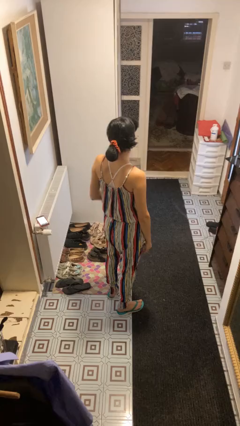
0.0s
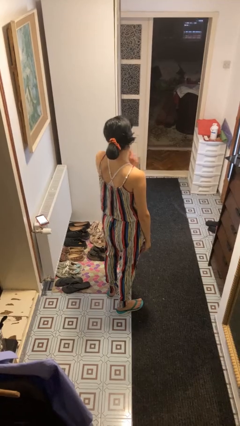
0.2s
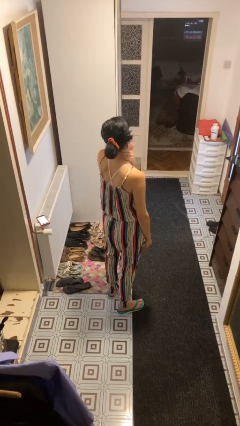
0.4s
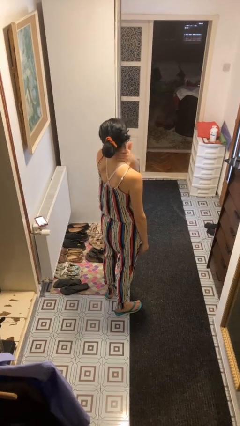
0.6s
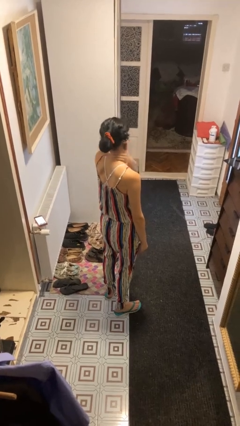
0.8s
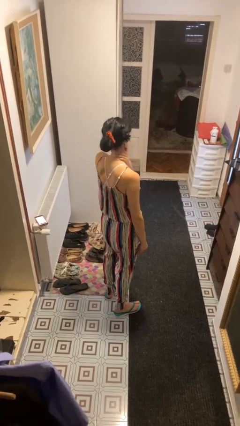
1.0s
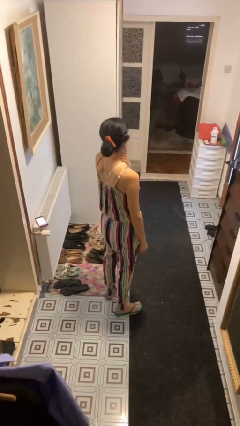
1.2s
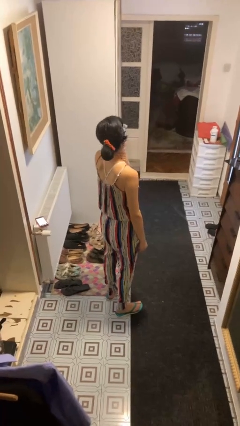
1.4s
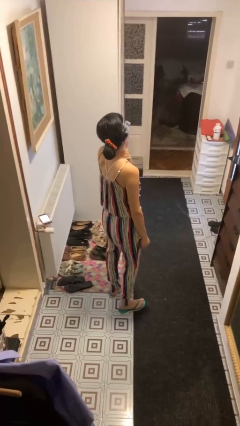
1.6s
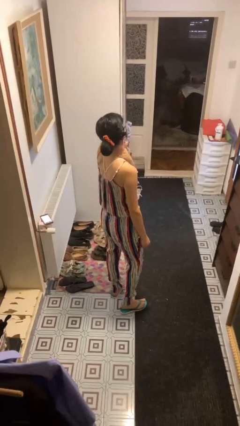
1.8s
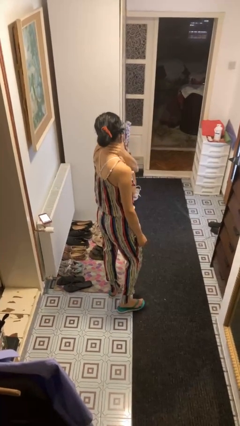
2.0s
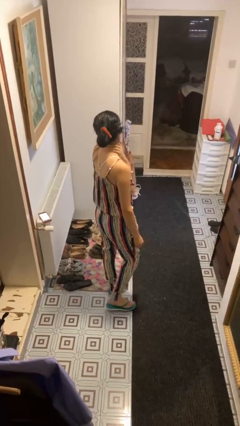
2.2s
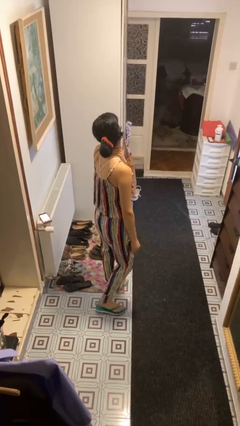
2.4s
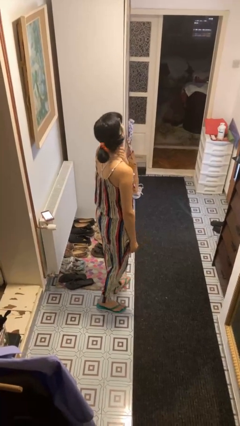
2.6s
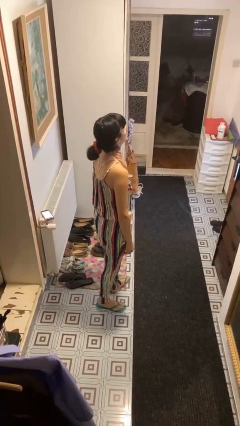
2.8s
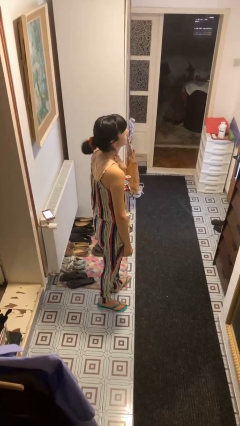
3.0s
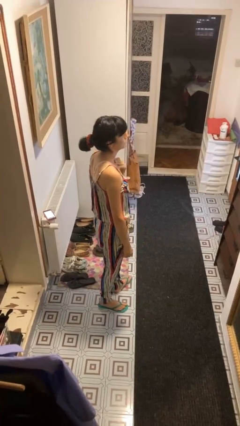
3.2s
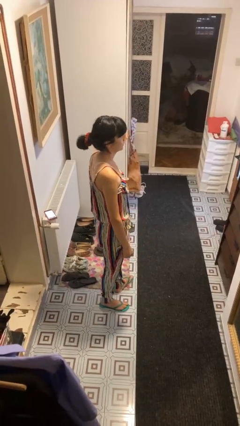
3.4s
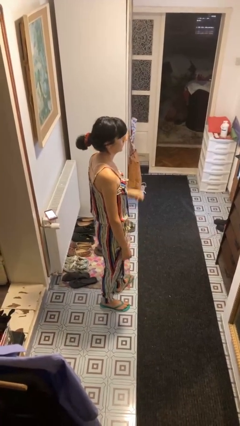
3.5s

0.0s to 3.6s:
person rubs neck

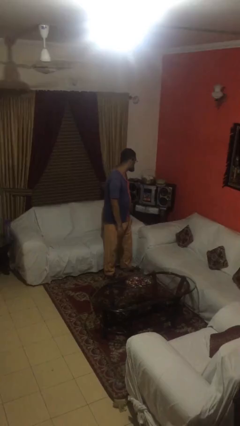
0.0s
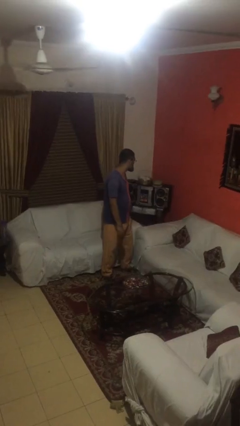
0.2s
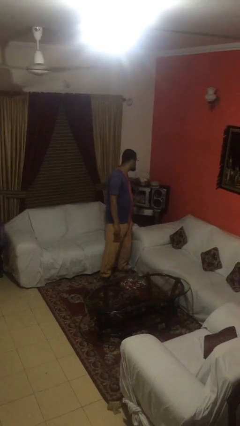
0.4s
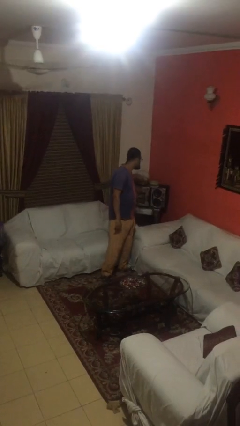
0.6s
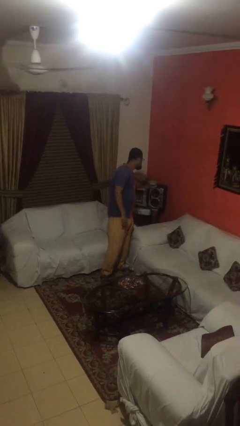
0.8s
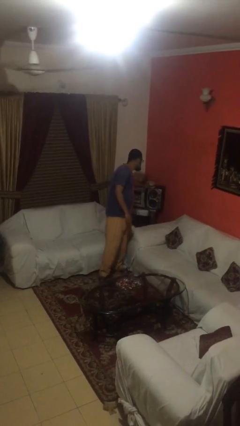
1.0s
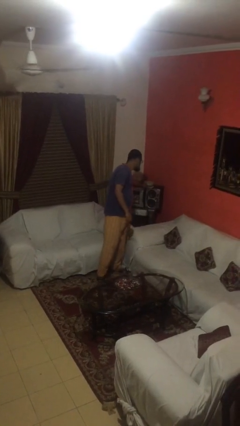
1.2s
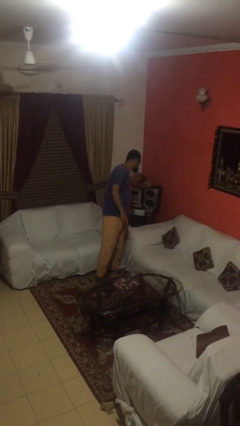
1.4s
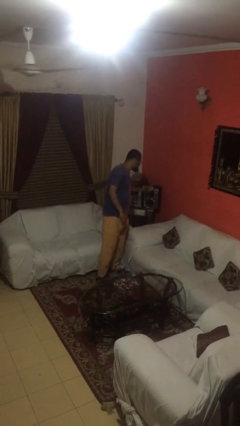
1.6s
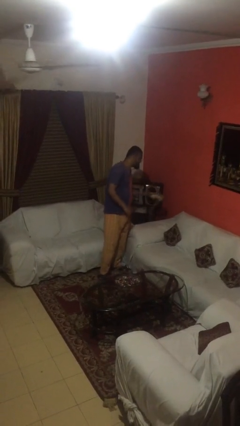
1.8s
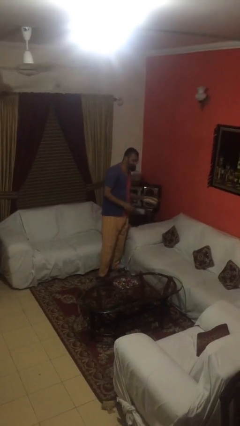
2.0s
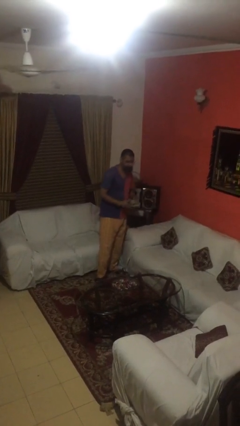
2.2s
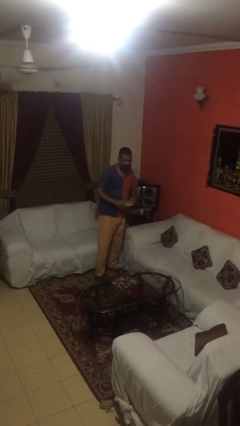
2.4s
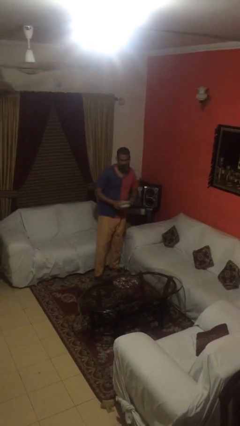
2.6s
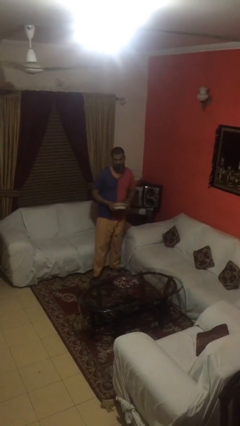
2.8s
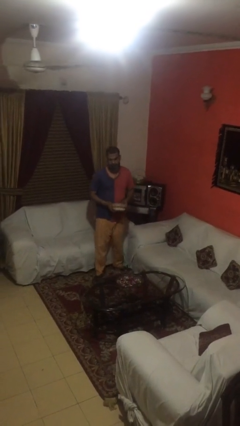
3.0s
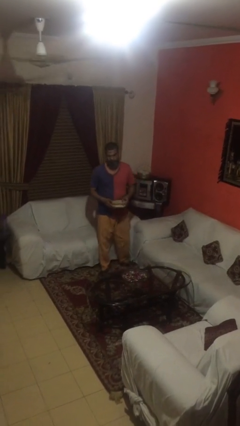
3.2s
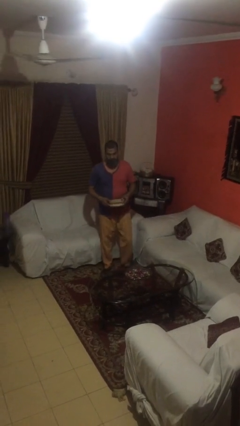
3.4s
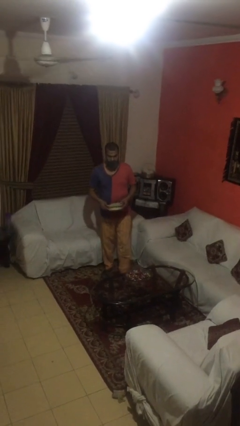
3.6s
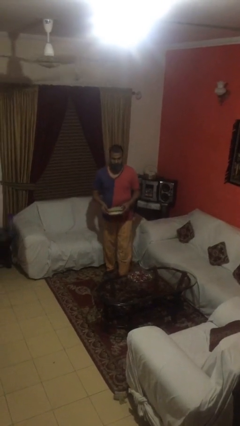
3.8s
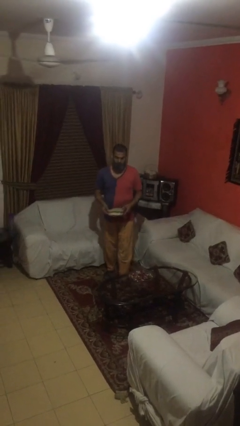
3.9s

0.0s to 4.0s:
person picks up object from shelf

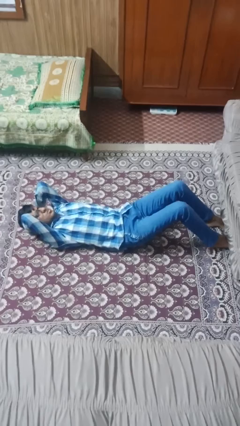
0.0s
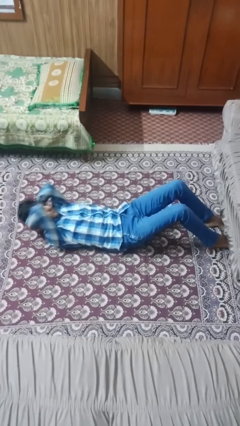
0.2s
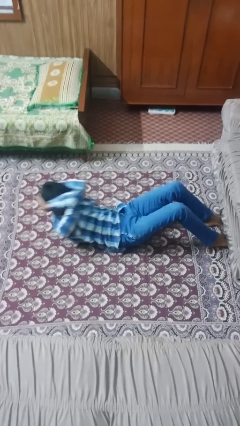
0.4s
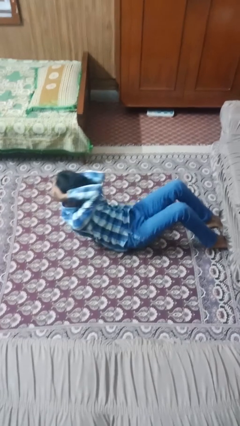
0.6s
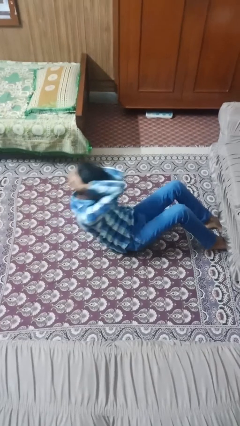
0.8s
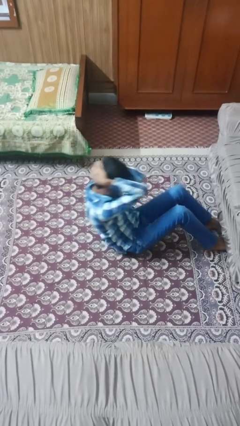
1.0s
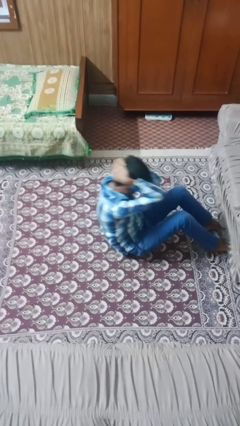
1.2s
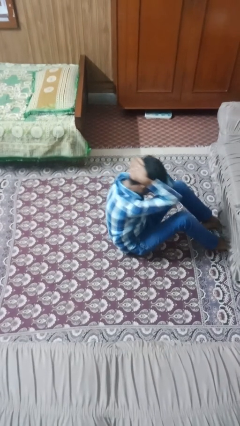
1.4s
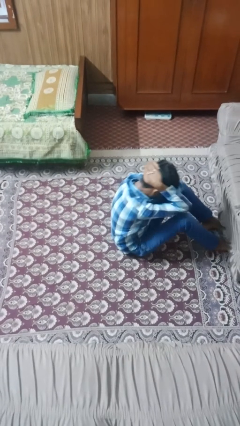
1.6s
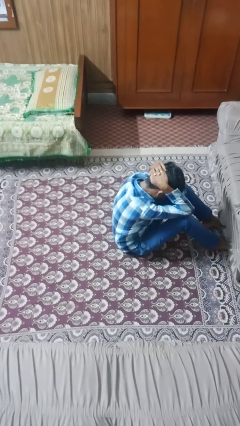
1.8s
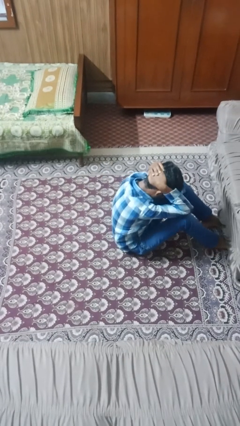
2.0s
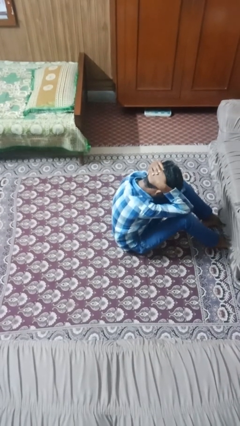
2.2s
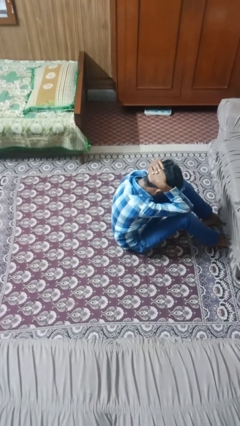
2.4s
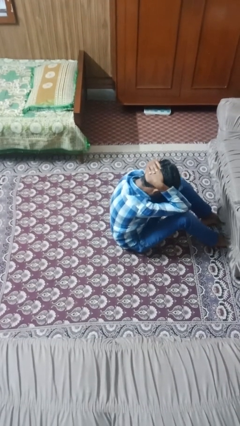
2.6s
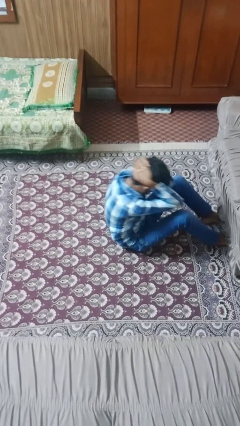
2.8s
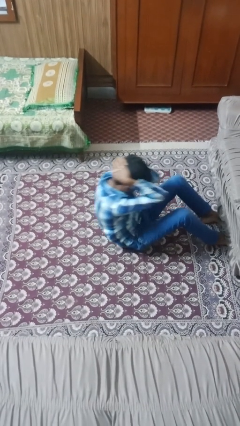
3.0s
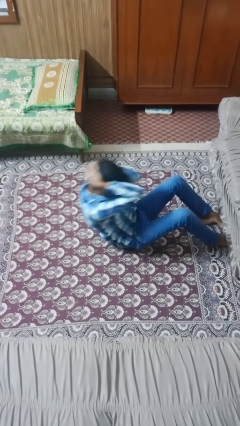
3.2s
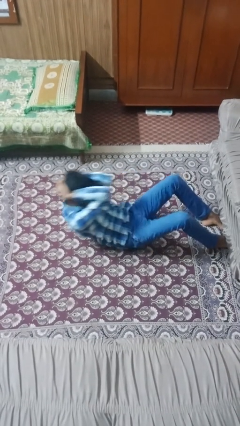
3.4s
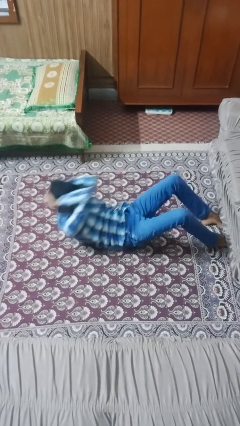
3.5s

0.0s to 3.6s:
person exercises with situp

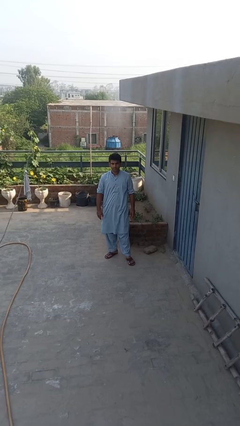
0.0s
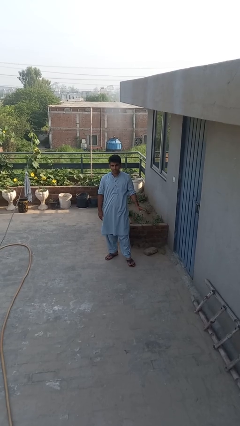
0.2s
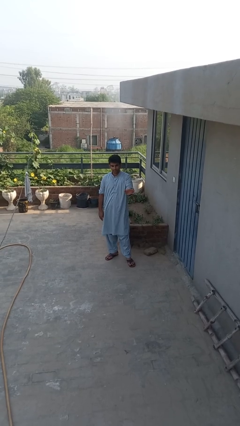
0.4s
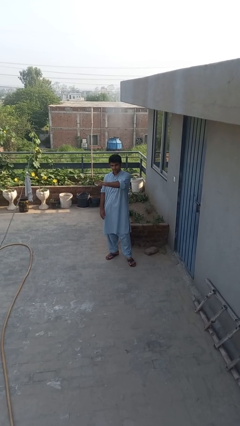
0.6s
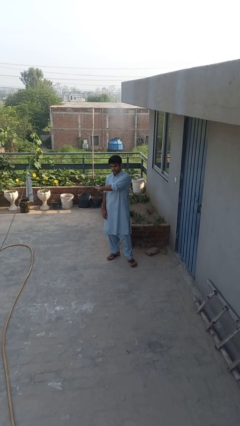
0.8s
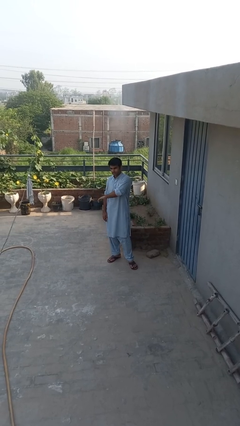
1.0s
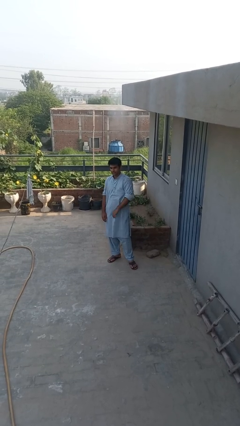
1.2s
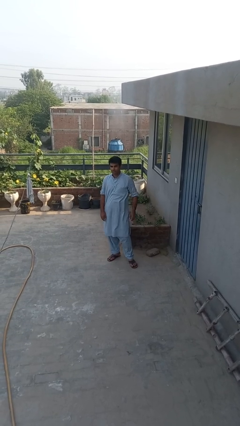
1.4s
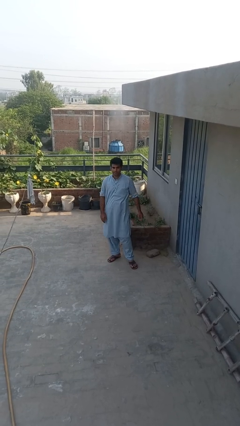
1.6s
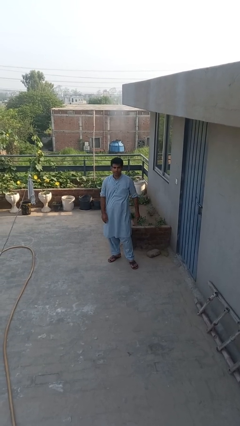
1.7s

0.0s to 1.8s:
person gestures swipe right

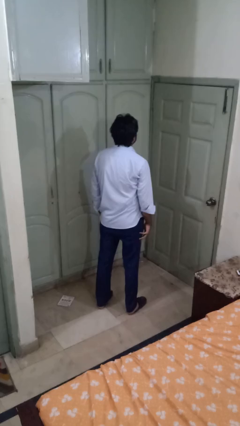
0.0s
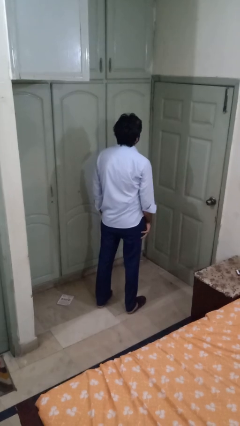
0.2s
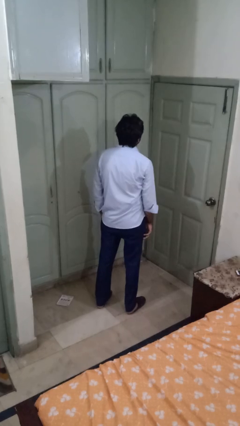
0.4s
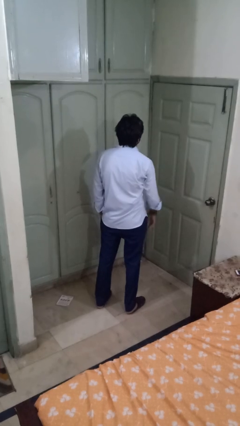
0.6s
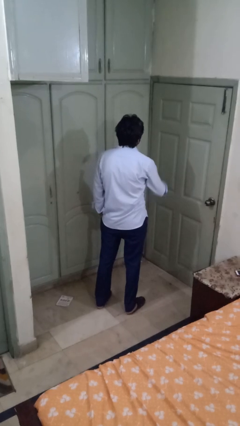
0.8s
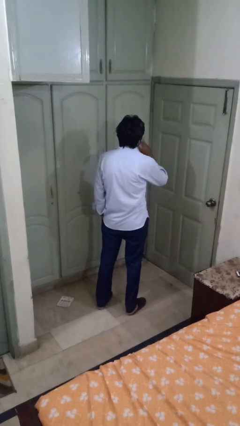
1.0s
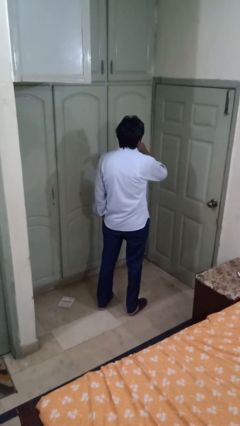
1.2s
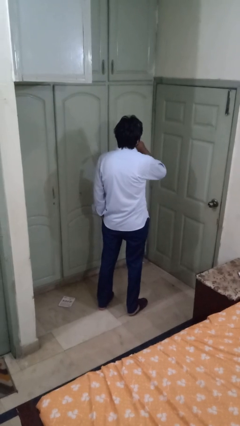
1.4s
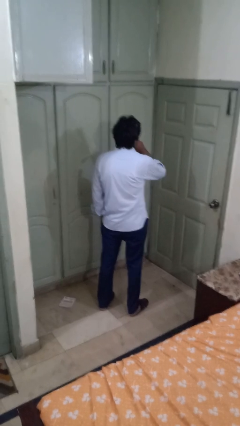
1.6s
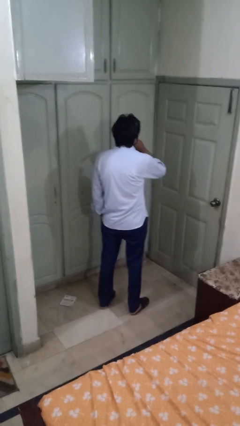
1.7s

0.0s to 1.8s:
person gestures be quiet

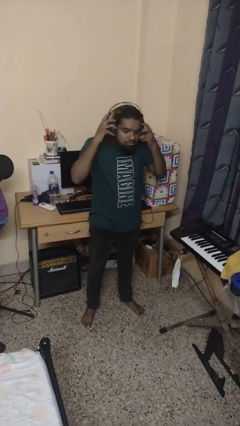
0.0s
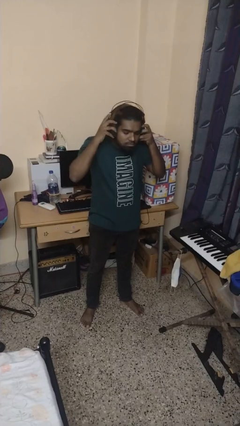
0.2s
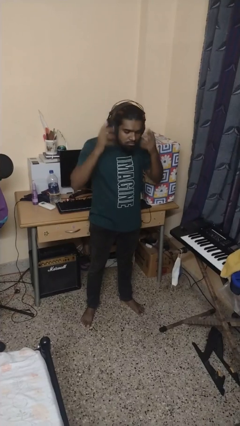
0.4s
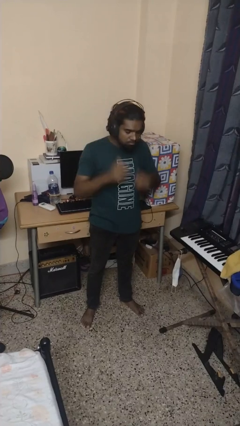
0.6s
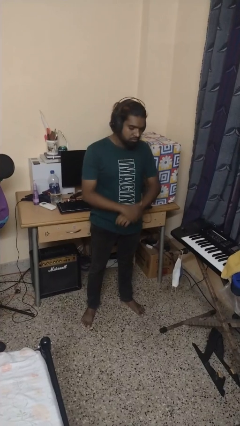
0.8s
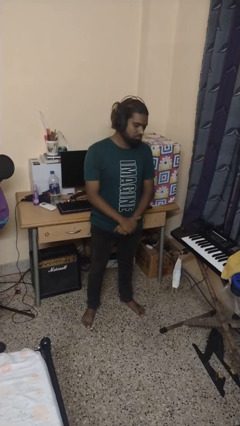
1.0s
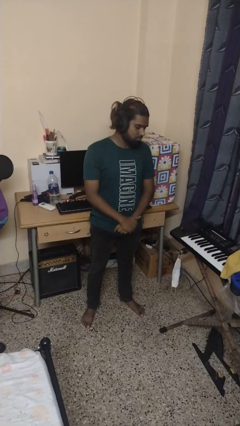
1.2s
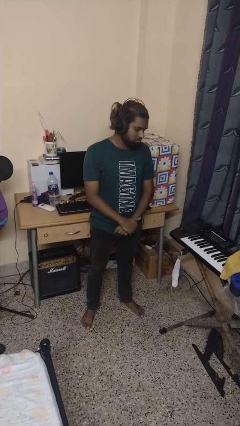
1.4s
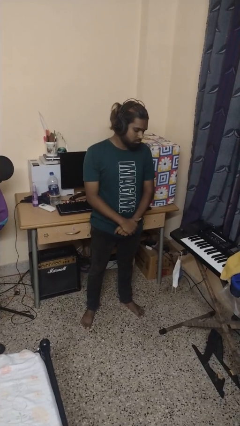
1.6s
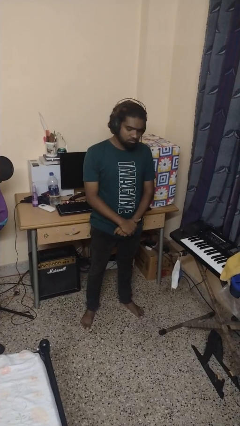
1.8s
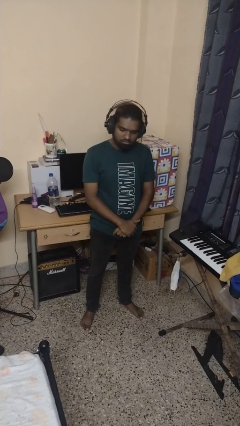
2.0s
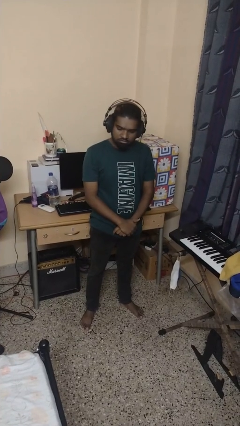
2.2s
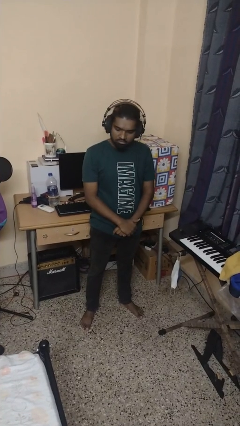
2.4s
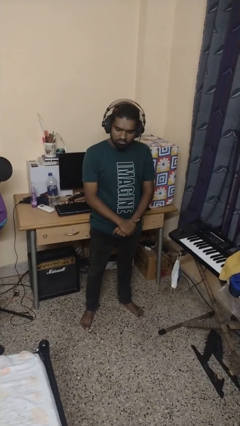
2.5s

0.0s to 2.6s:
person puts on headphones
